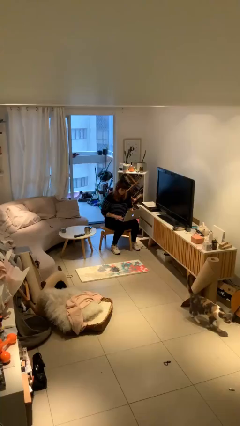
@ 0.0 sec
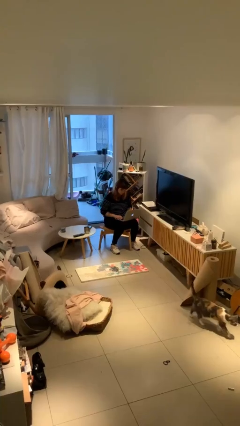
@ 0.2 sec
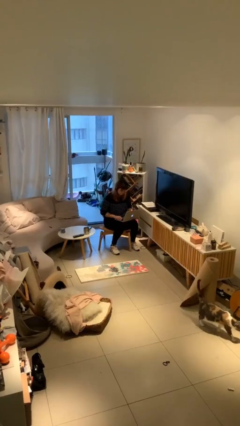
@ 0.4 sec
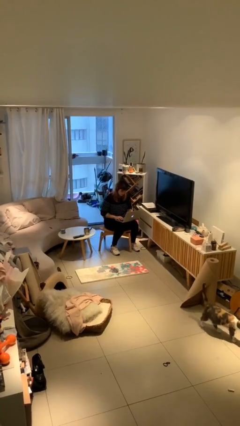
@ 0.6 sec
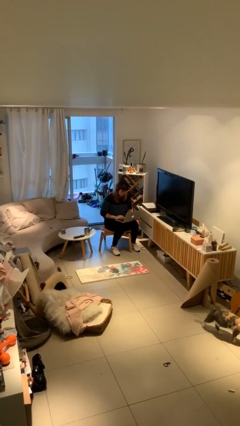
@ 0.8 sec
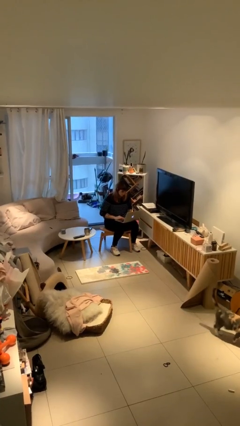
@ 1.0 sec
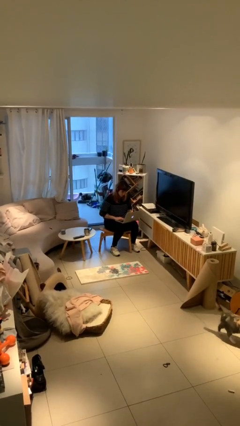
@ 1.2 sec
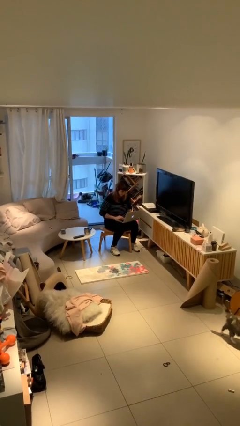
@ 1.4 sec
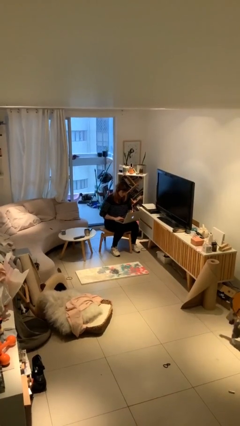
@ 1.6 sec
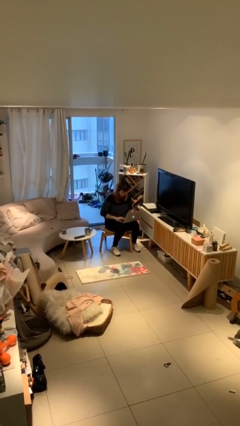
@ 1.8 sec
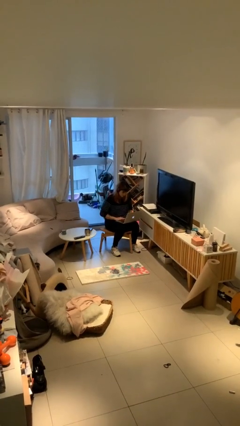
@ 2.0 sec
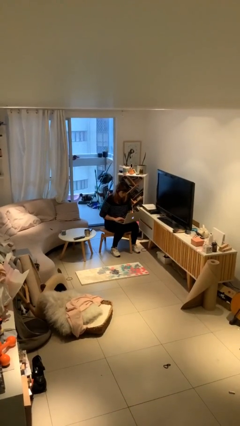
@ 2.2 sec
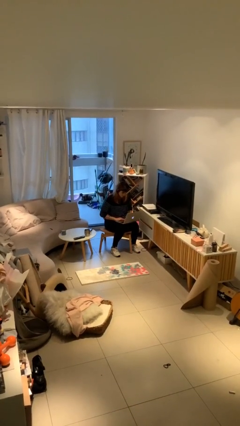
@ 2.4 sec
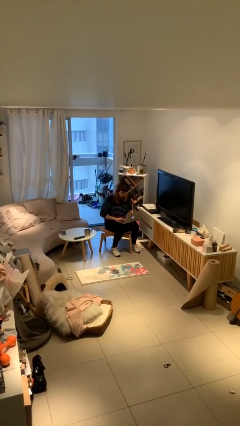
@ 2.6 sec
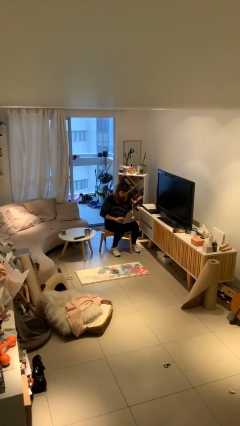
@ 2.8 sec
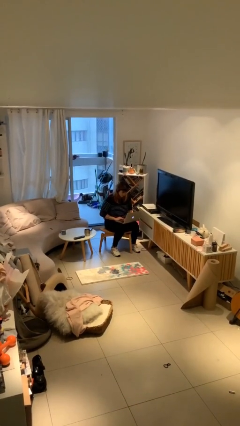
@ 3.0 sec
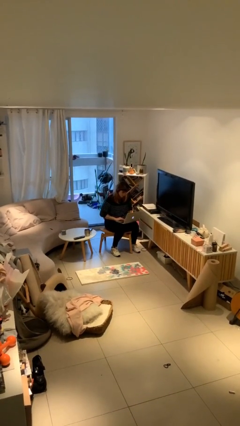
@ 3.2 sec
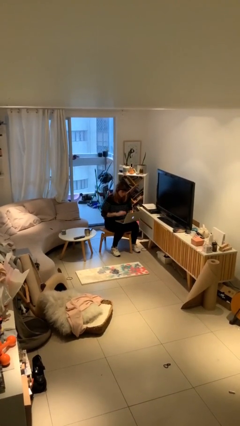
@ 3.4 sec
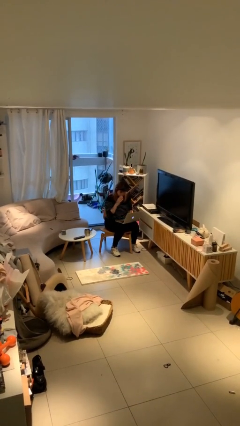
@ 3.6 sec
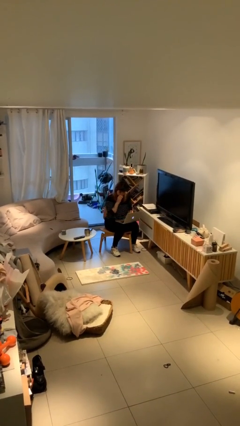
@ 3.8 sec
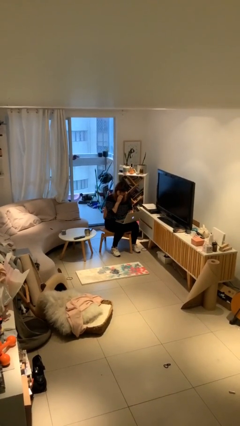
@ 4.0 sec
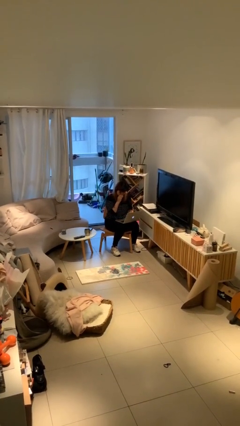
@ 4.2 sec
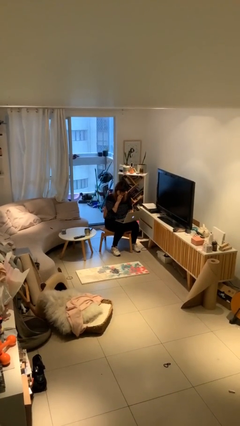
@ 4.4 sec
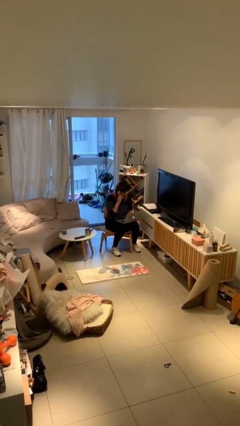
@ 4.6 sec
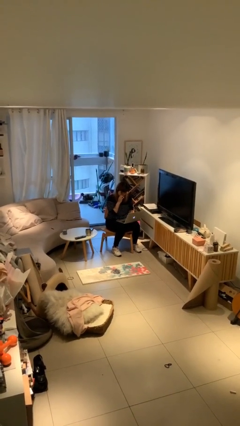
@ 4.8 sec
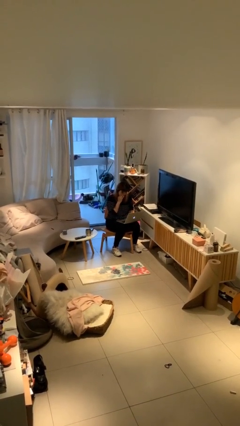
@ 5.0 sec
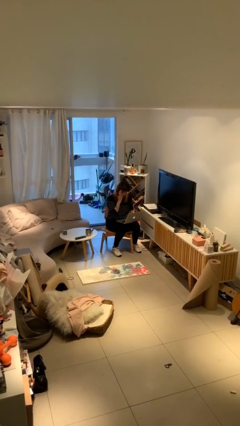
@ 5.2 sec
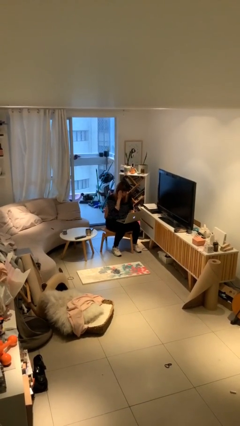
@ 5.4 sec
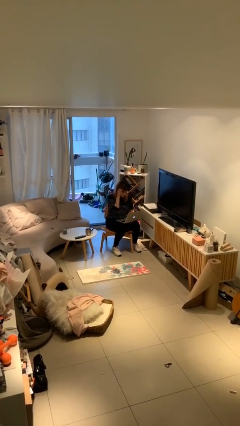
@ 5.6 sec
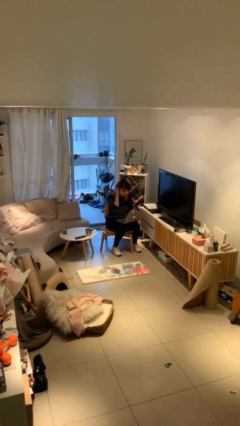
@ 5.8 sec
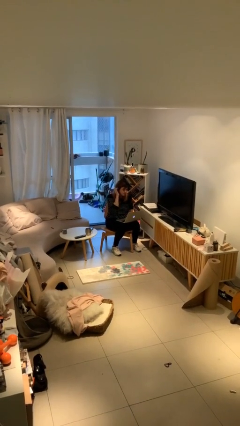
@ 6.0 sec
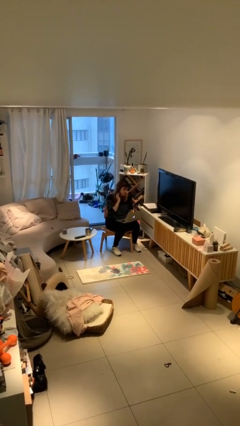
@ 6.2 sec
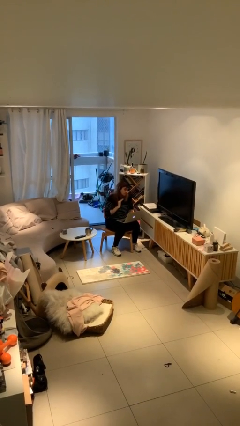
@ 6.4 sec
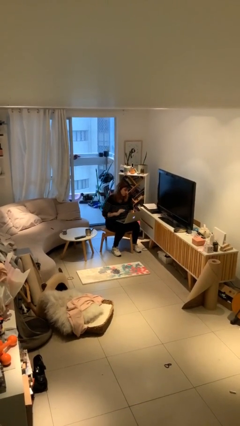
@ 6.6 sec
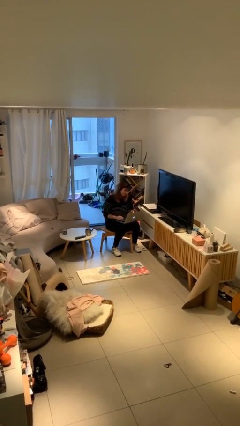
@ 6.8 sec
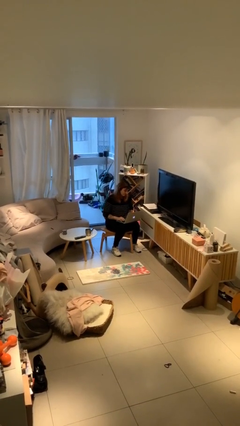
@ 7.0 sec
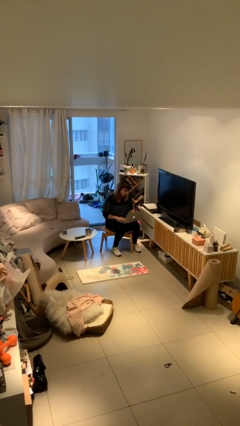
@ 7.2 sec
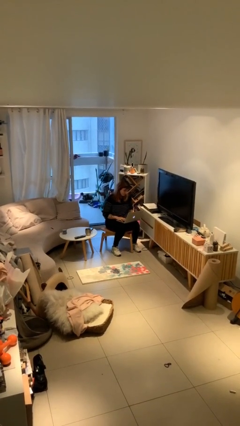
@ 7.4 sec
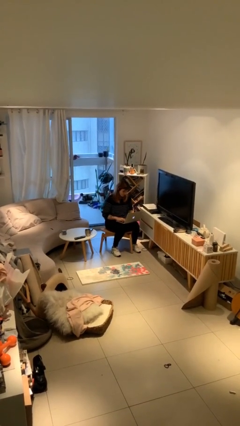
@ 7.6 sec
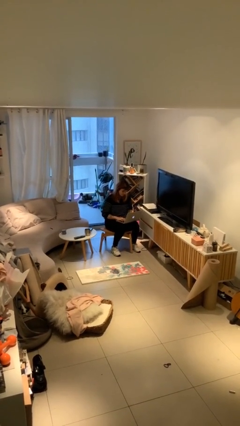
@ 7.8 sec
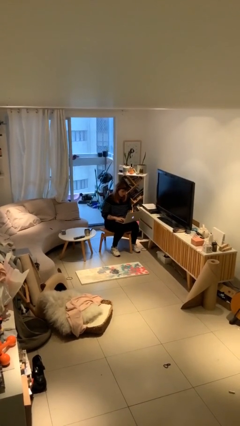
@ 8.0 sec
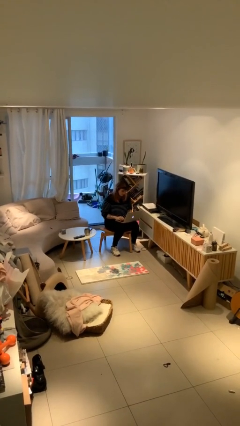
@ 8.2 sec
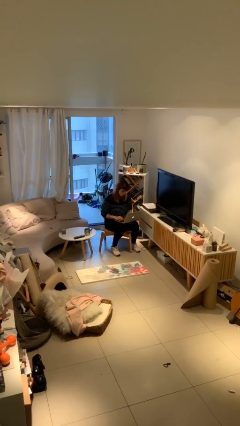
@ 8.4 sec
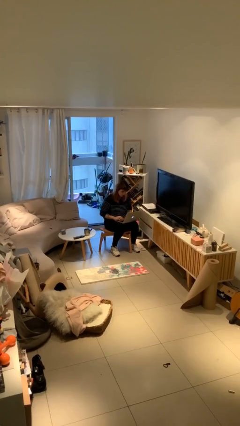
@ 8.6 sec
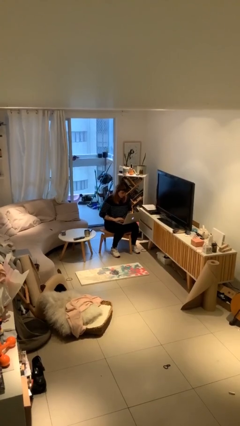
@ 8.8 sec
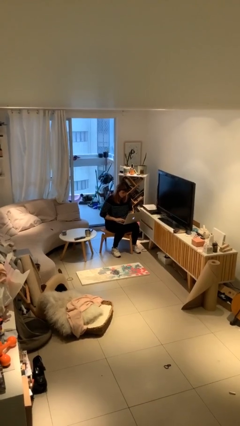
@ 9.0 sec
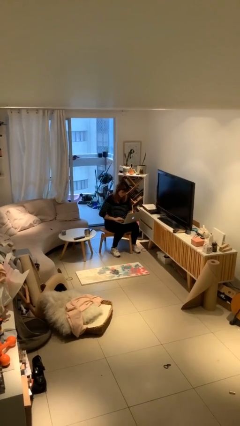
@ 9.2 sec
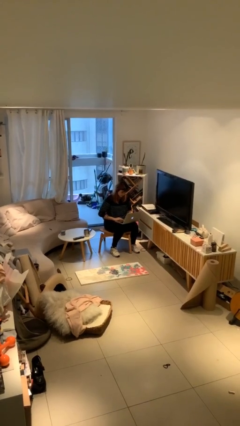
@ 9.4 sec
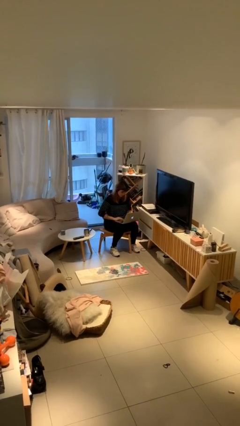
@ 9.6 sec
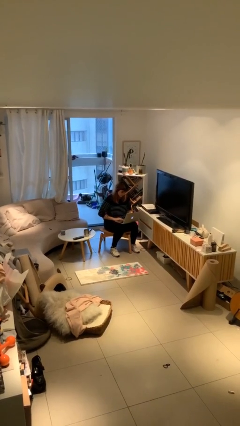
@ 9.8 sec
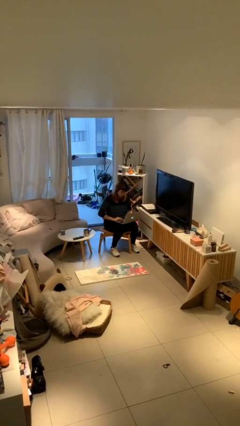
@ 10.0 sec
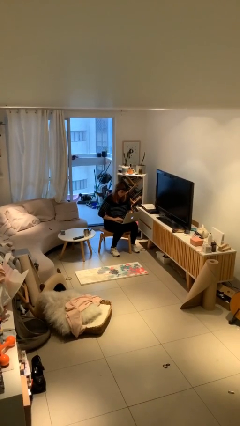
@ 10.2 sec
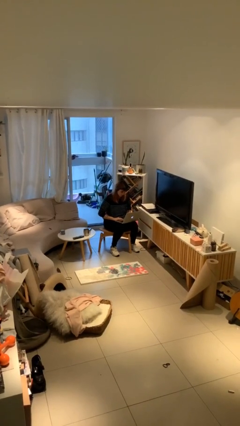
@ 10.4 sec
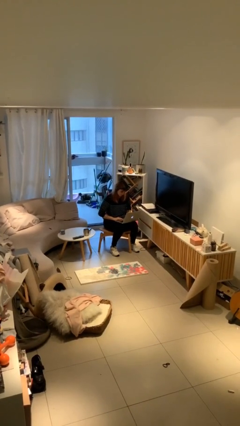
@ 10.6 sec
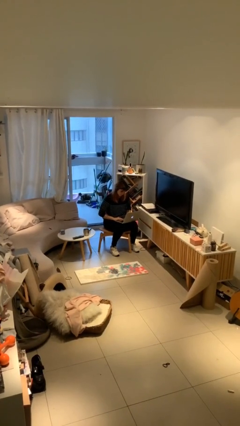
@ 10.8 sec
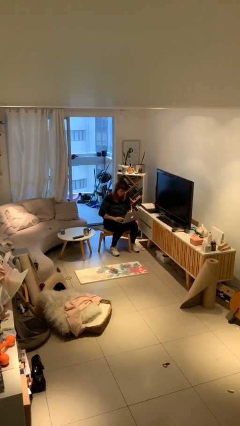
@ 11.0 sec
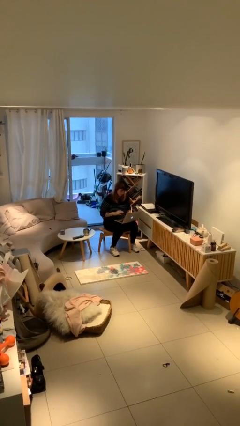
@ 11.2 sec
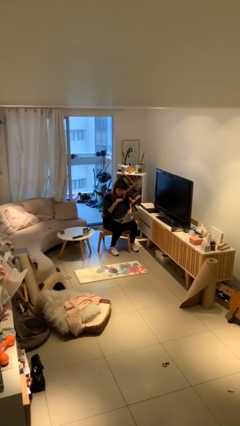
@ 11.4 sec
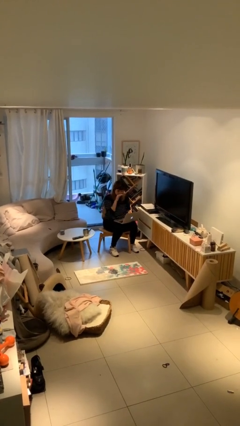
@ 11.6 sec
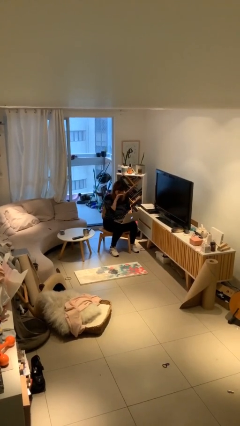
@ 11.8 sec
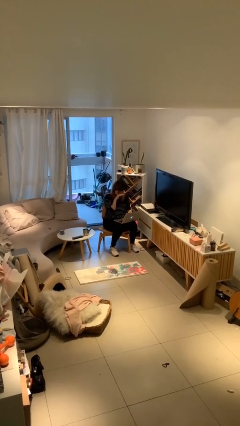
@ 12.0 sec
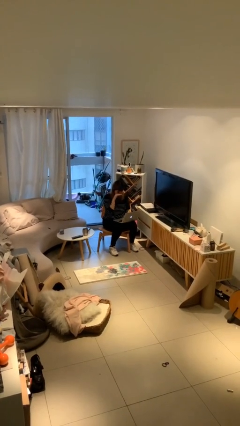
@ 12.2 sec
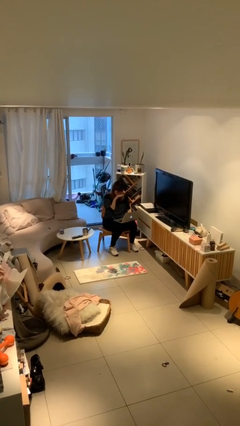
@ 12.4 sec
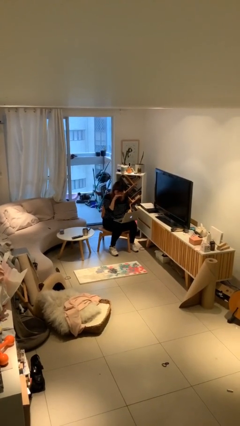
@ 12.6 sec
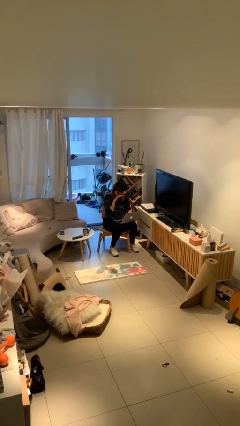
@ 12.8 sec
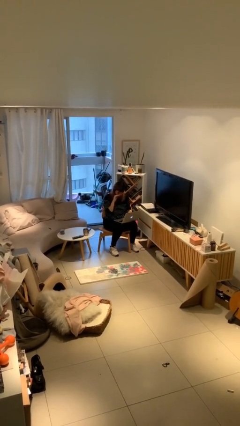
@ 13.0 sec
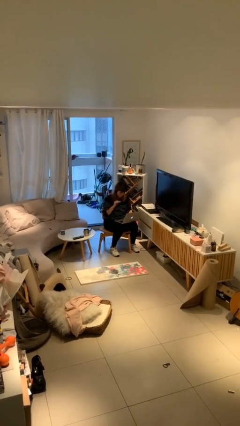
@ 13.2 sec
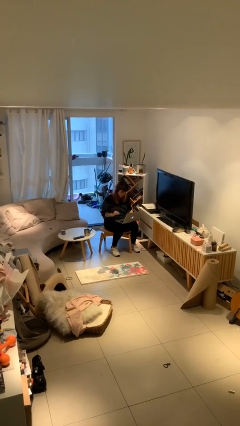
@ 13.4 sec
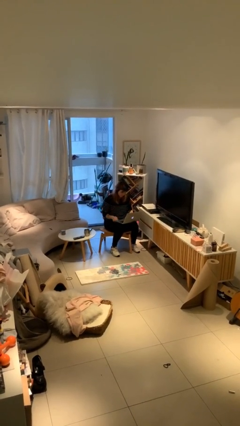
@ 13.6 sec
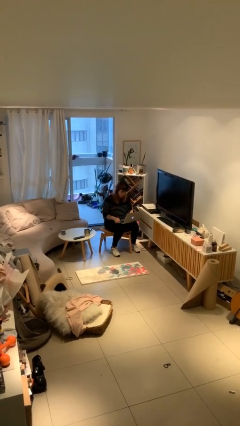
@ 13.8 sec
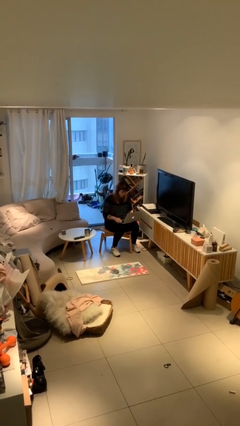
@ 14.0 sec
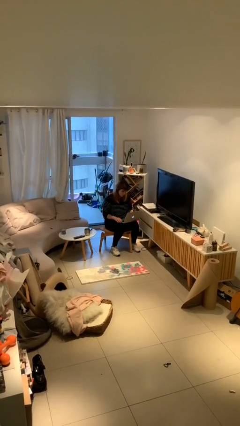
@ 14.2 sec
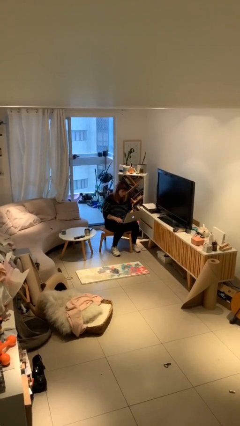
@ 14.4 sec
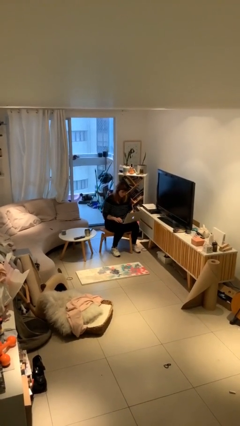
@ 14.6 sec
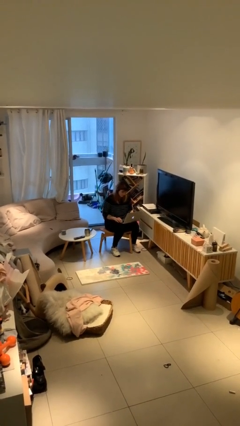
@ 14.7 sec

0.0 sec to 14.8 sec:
person interacts with laptop

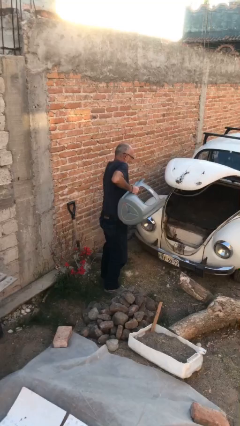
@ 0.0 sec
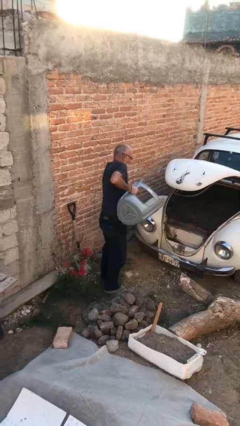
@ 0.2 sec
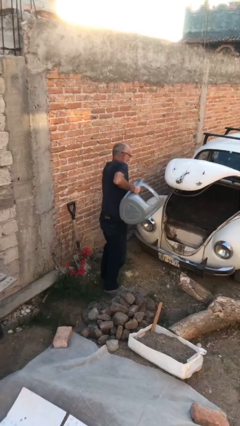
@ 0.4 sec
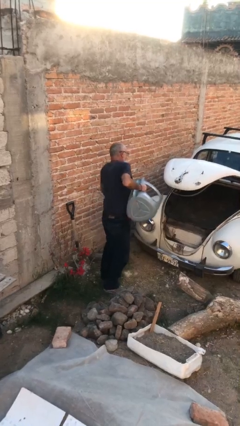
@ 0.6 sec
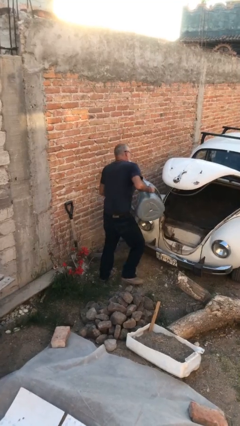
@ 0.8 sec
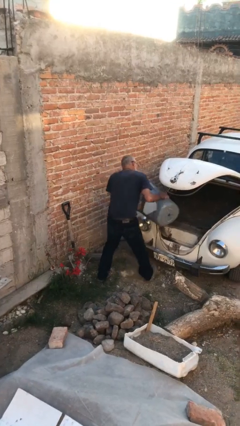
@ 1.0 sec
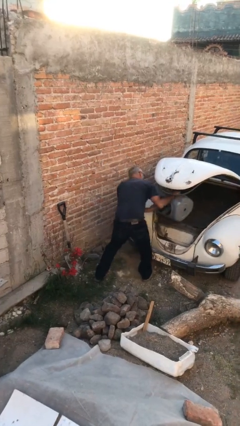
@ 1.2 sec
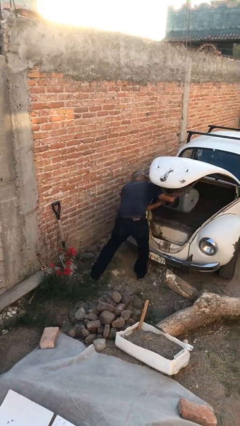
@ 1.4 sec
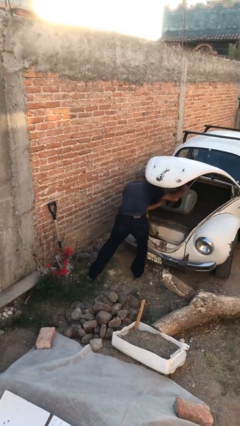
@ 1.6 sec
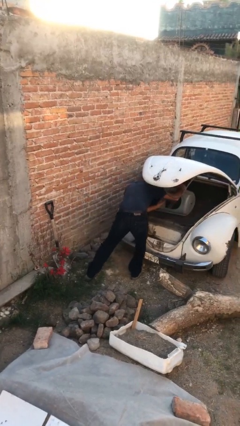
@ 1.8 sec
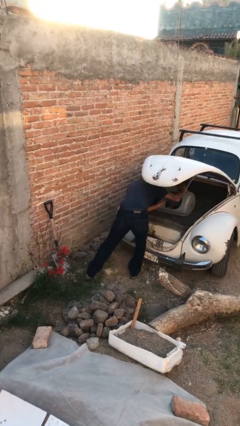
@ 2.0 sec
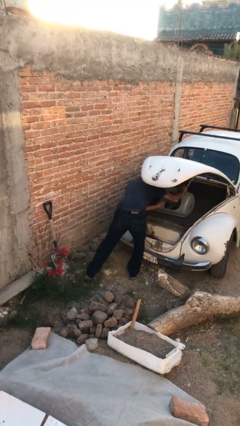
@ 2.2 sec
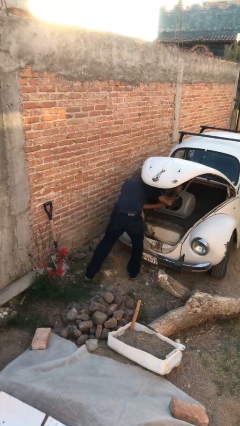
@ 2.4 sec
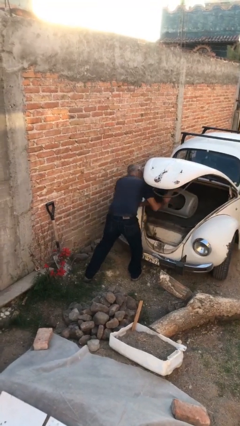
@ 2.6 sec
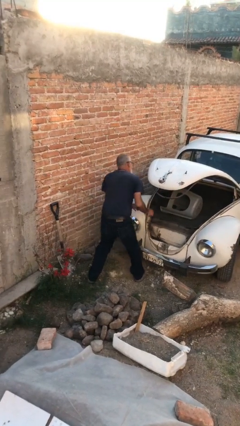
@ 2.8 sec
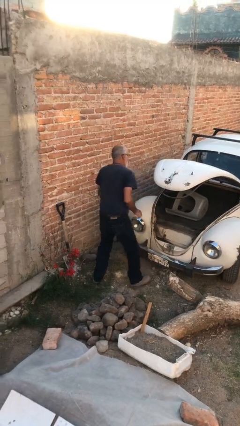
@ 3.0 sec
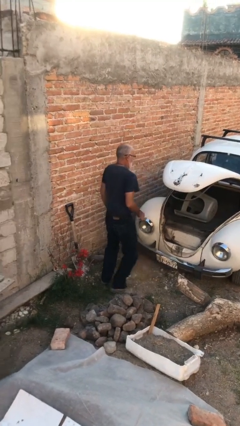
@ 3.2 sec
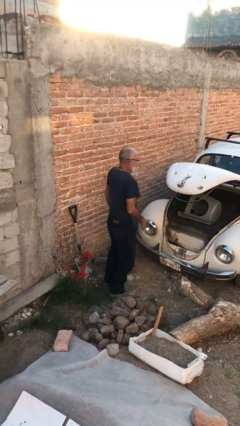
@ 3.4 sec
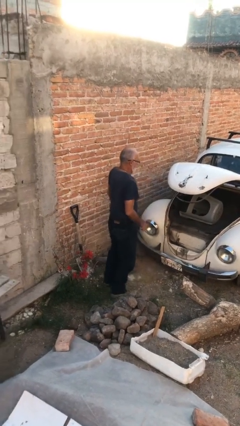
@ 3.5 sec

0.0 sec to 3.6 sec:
person loads car
